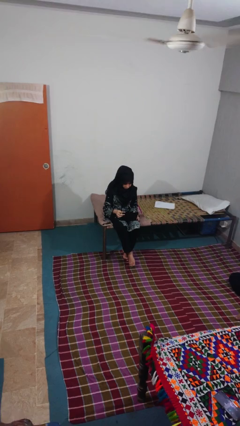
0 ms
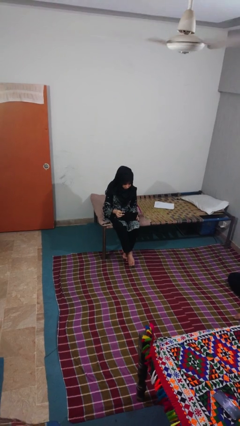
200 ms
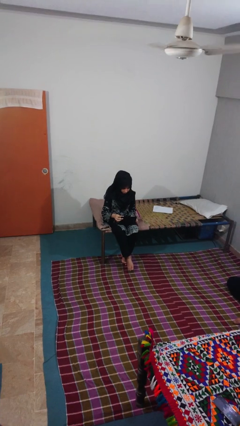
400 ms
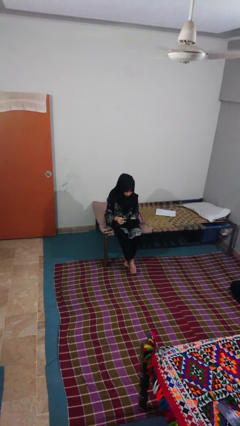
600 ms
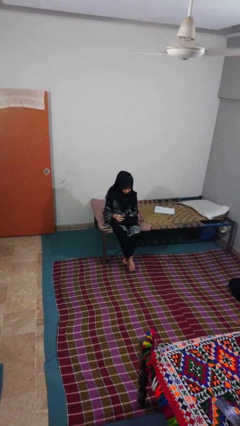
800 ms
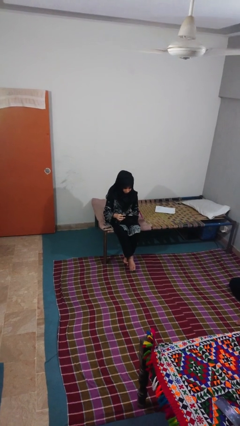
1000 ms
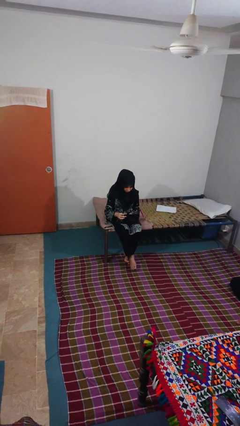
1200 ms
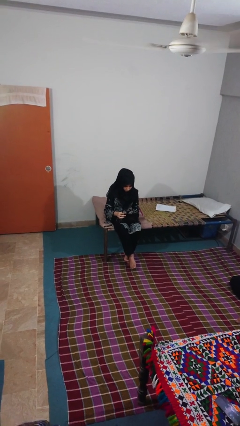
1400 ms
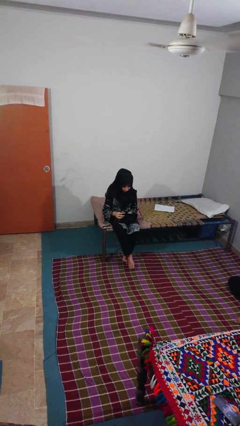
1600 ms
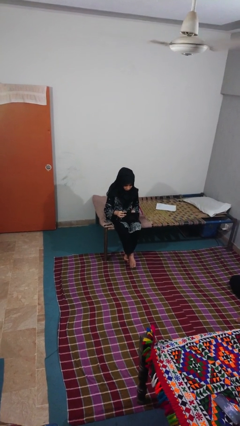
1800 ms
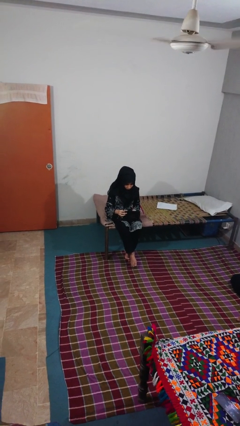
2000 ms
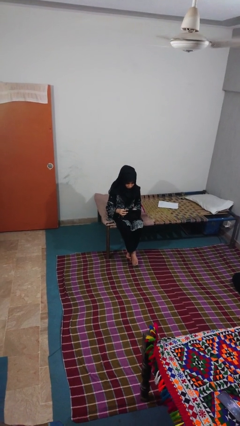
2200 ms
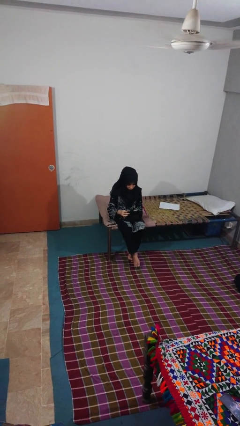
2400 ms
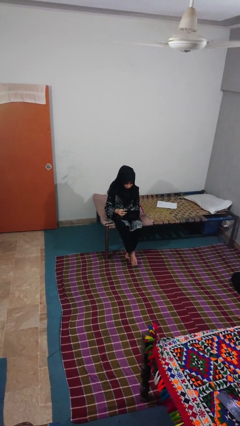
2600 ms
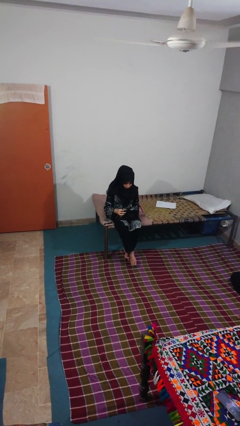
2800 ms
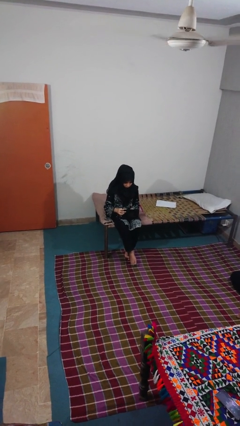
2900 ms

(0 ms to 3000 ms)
person searches jewelry box

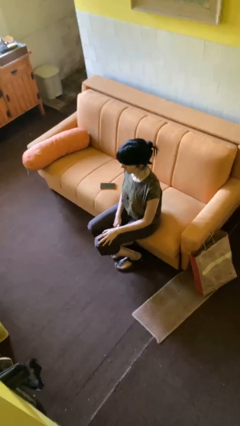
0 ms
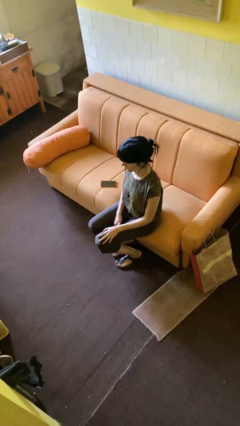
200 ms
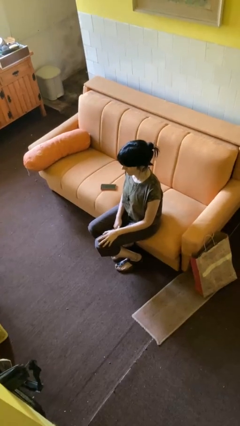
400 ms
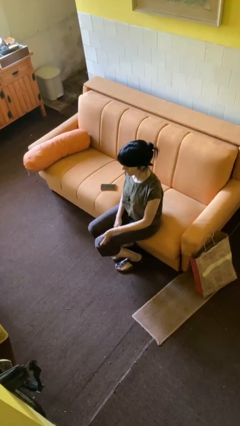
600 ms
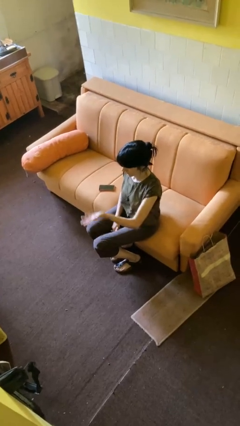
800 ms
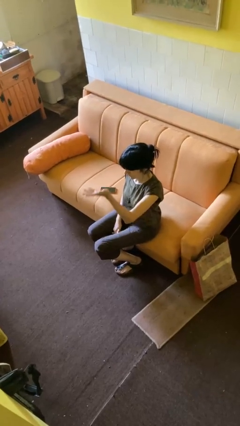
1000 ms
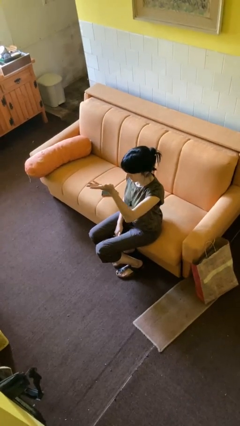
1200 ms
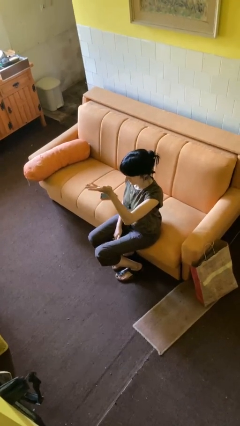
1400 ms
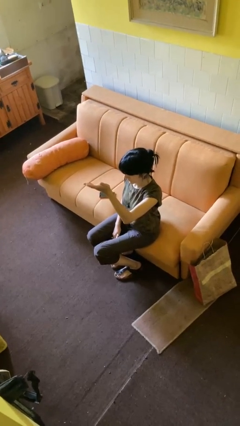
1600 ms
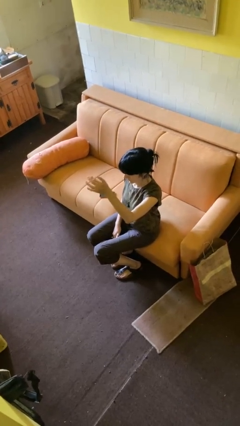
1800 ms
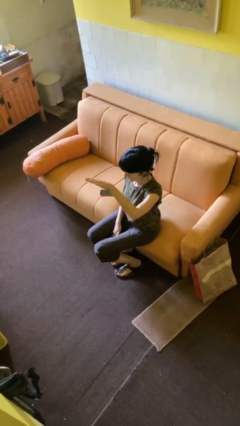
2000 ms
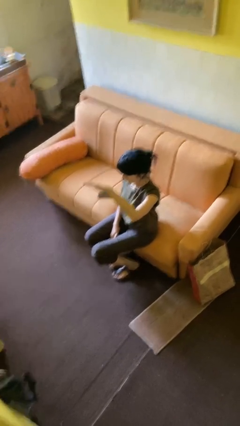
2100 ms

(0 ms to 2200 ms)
person gestures swipe up

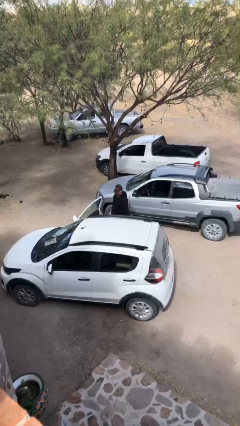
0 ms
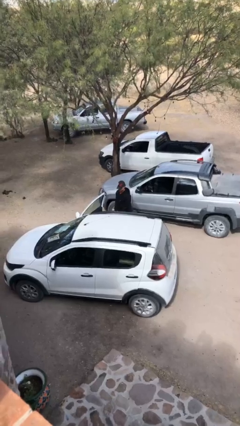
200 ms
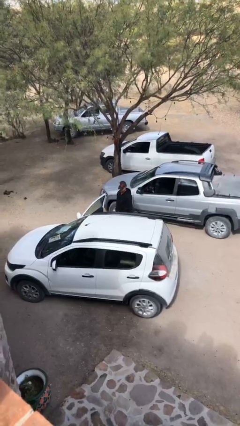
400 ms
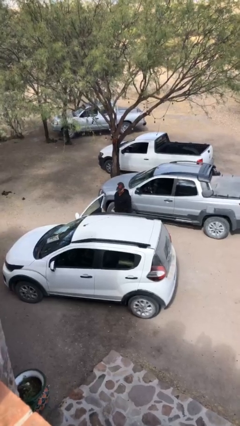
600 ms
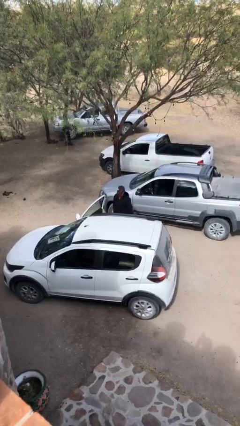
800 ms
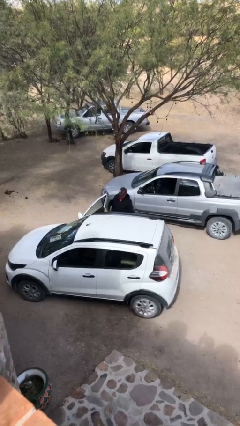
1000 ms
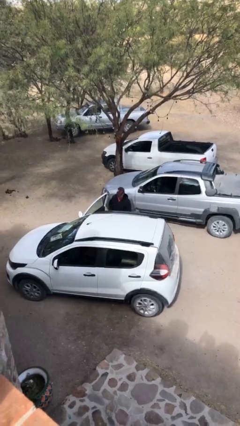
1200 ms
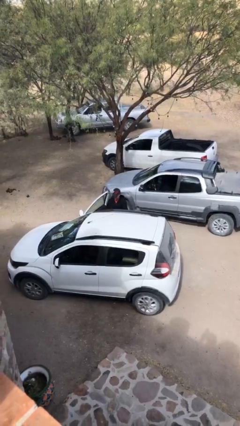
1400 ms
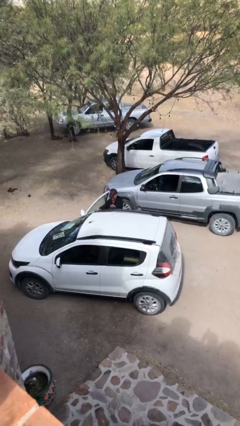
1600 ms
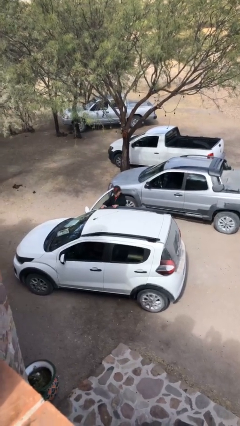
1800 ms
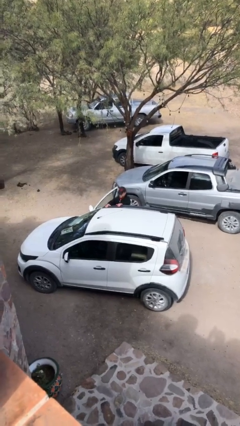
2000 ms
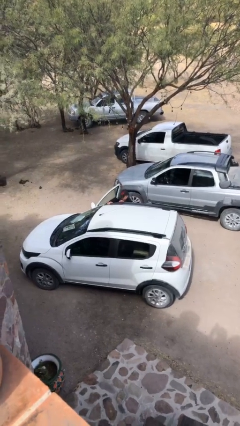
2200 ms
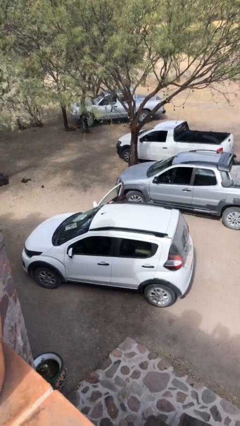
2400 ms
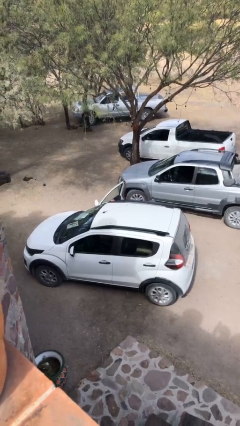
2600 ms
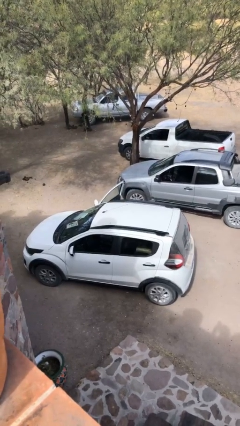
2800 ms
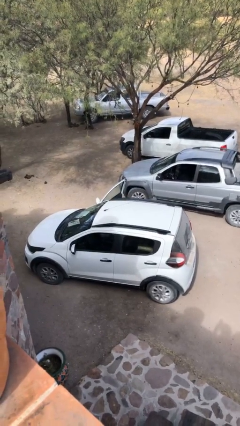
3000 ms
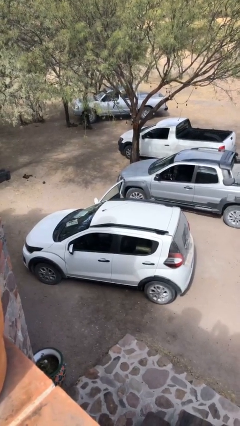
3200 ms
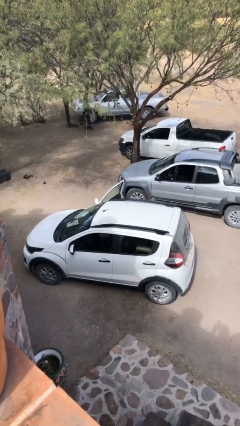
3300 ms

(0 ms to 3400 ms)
person enters car

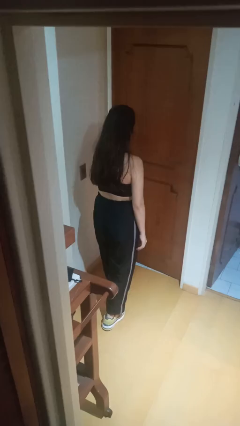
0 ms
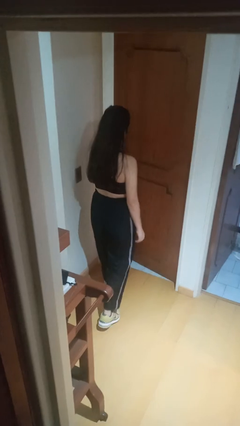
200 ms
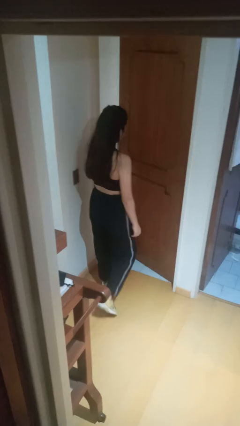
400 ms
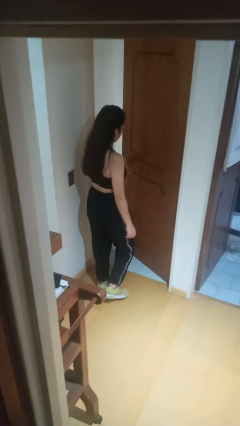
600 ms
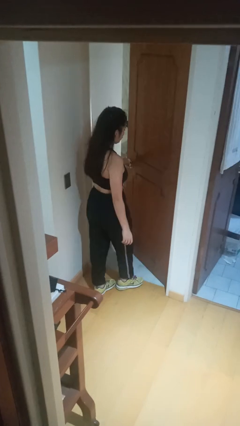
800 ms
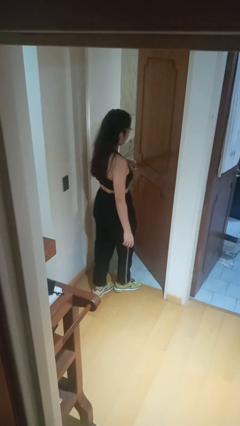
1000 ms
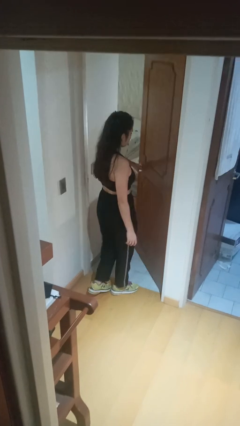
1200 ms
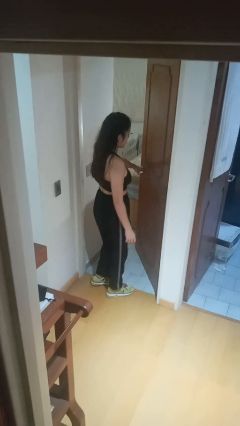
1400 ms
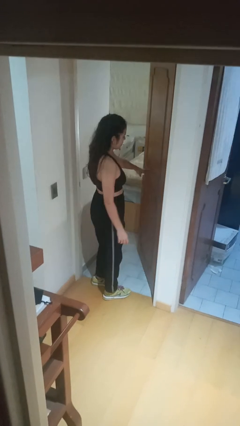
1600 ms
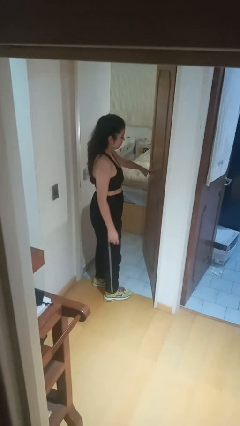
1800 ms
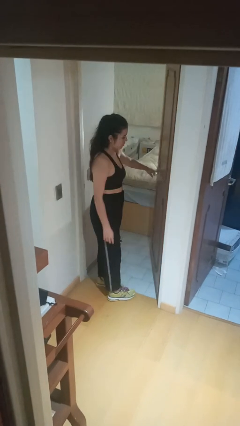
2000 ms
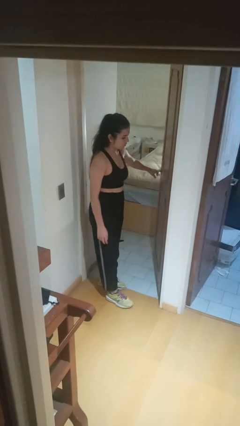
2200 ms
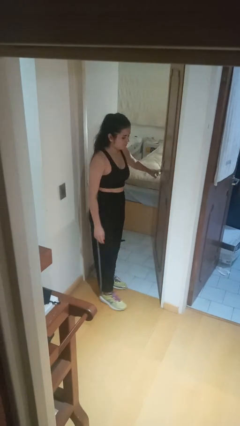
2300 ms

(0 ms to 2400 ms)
person opens facility door

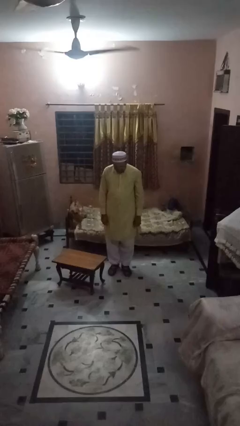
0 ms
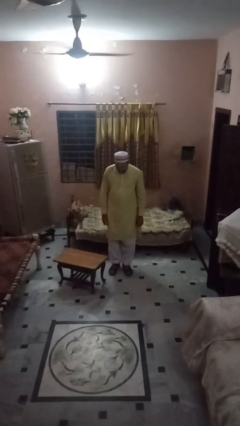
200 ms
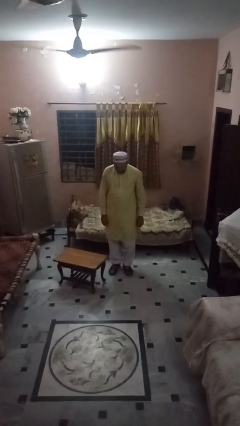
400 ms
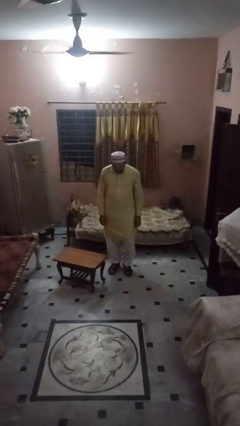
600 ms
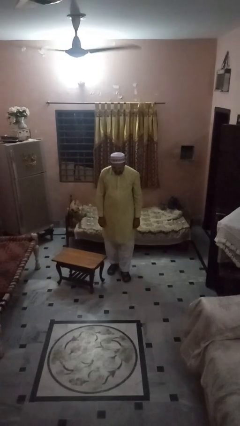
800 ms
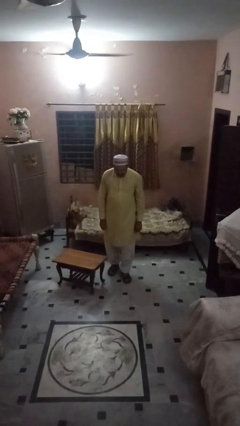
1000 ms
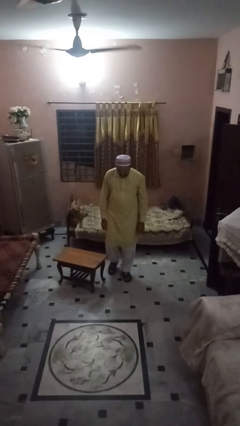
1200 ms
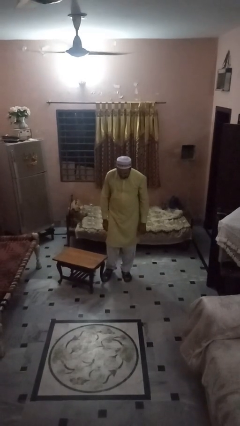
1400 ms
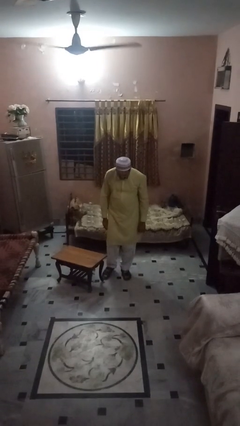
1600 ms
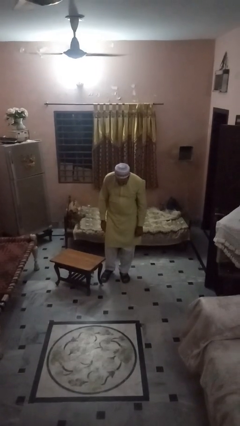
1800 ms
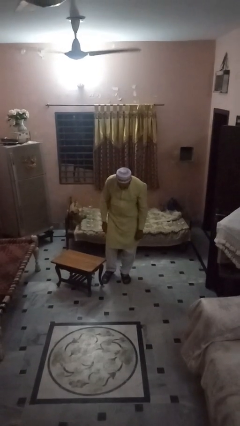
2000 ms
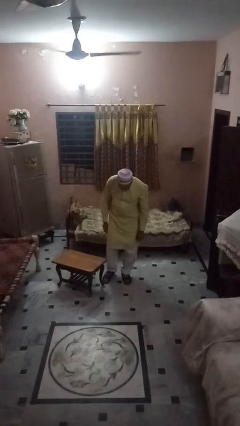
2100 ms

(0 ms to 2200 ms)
person trips on object on floor

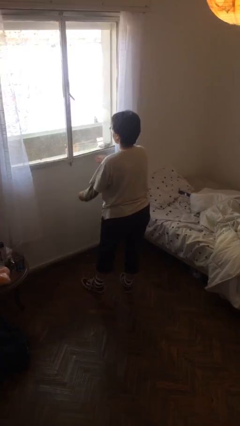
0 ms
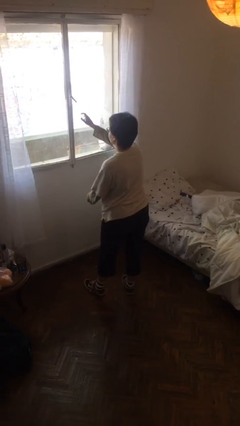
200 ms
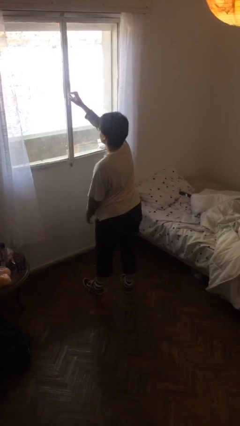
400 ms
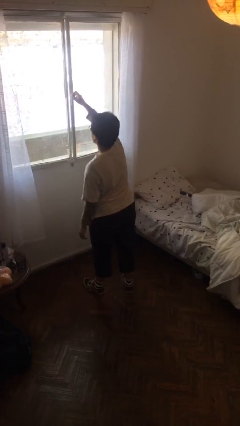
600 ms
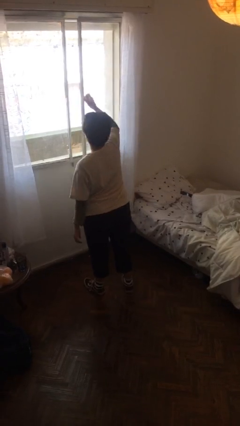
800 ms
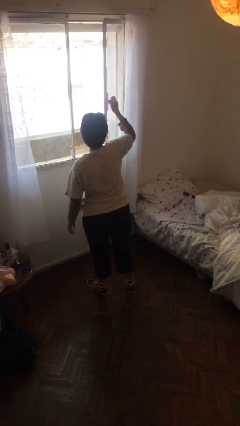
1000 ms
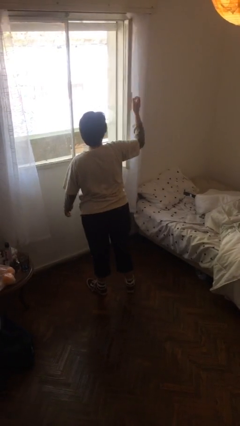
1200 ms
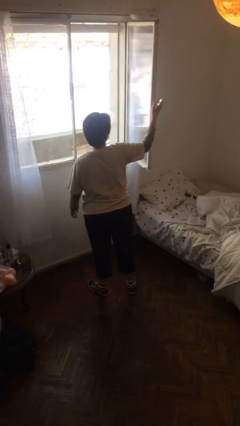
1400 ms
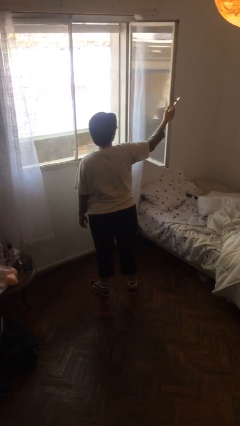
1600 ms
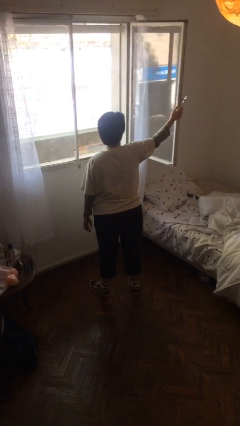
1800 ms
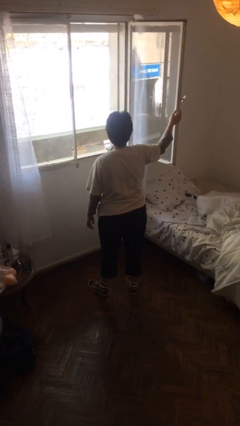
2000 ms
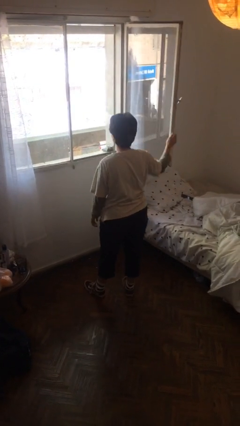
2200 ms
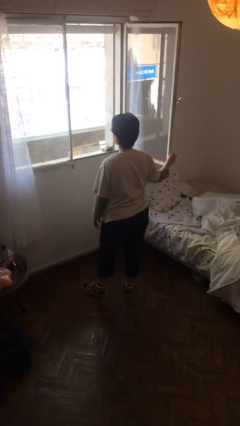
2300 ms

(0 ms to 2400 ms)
person opens home window

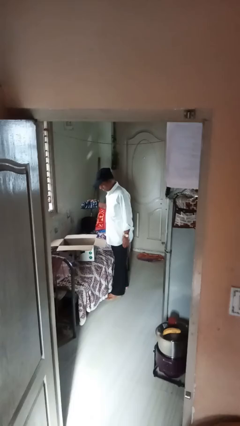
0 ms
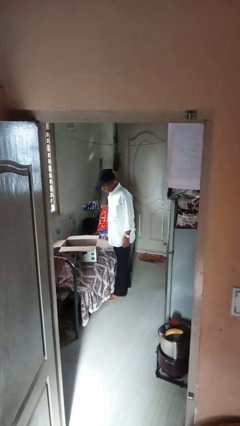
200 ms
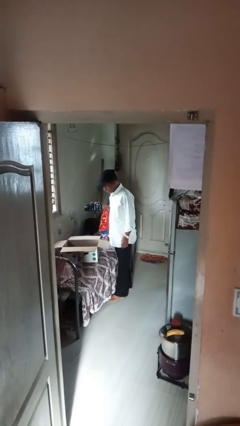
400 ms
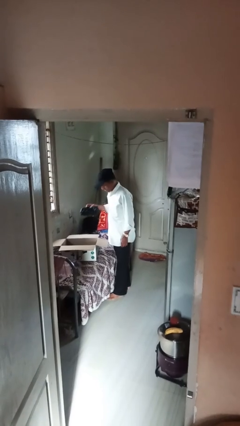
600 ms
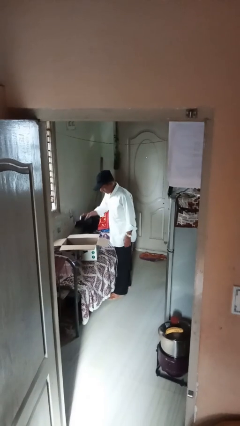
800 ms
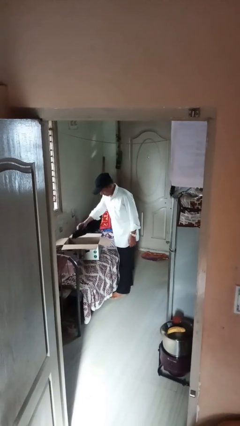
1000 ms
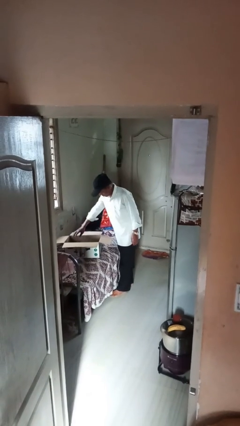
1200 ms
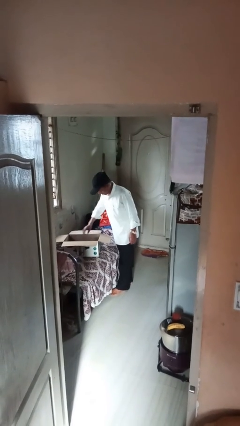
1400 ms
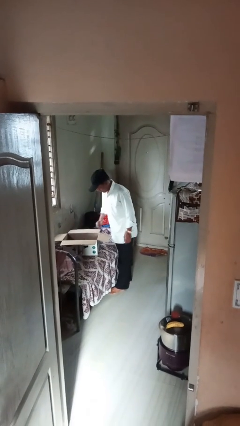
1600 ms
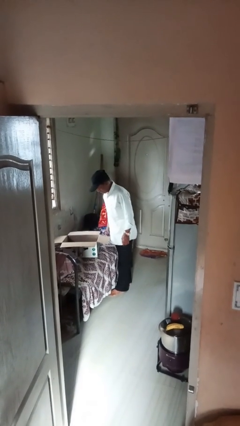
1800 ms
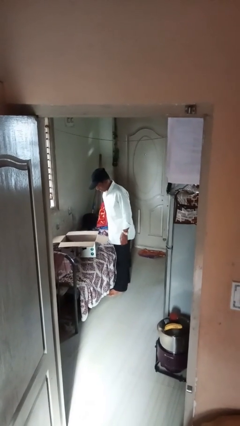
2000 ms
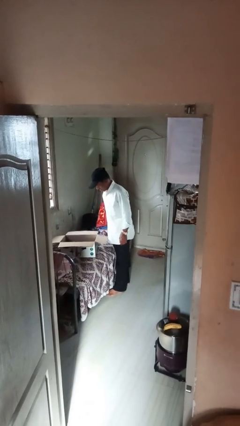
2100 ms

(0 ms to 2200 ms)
person puts object into box
